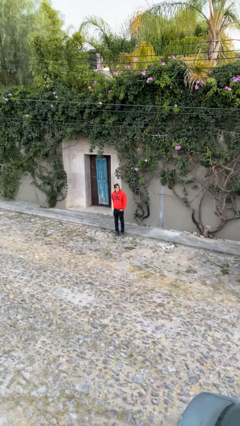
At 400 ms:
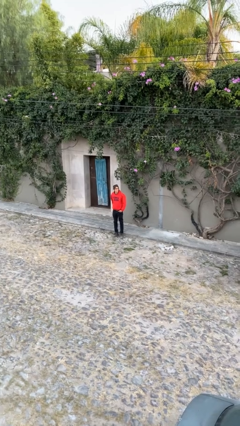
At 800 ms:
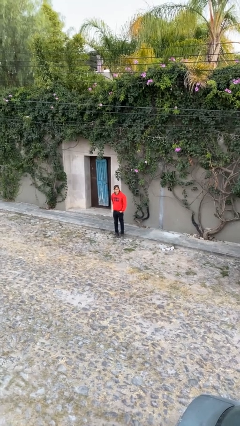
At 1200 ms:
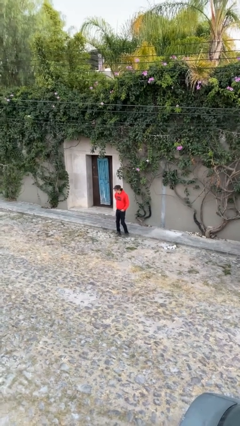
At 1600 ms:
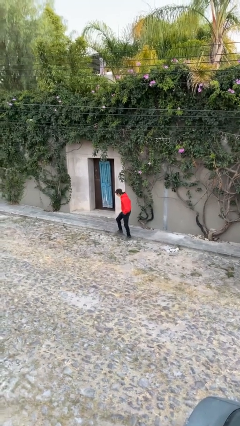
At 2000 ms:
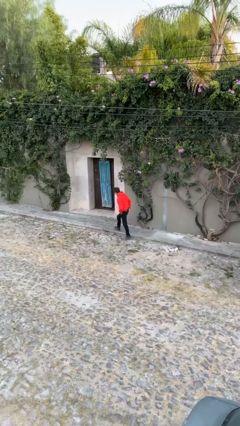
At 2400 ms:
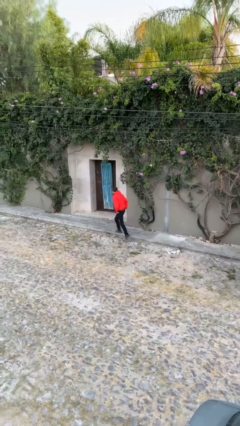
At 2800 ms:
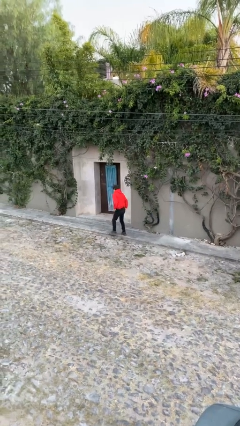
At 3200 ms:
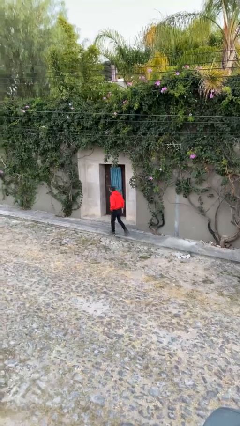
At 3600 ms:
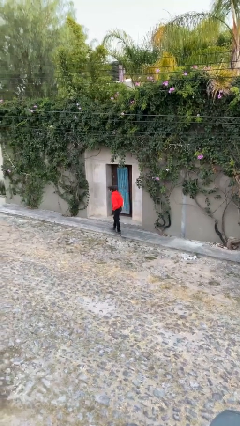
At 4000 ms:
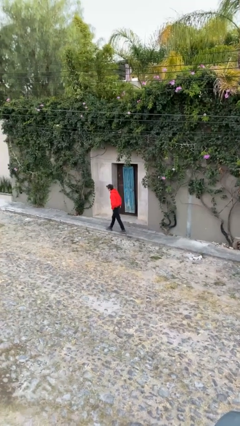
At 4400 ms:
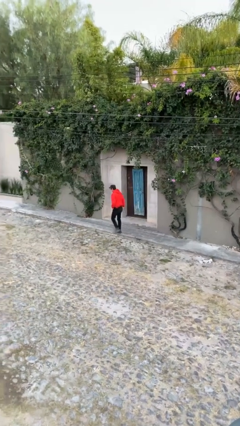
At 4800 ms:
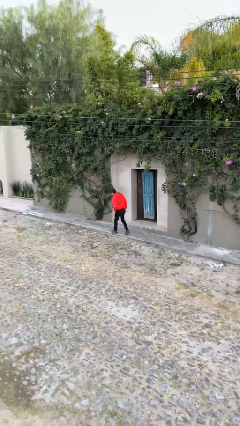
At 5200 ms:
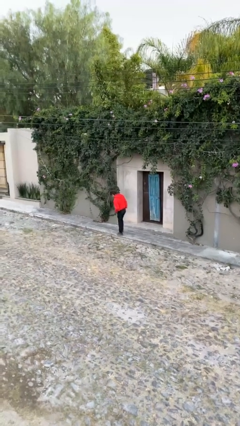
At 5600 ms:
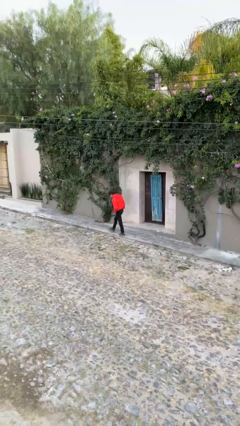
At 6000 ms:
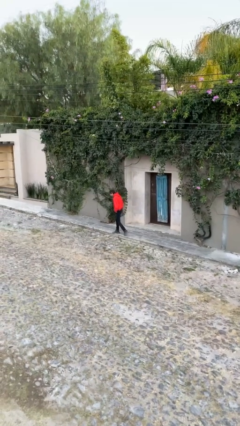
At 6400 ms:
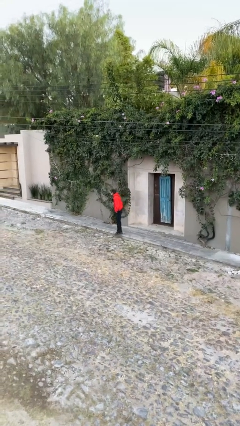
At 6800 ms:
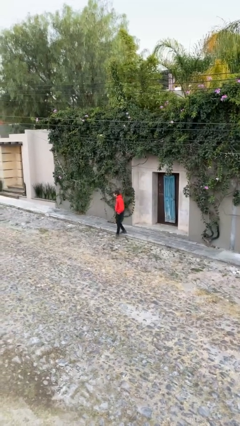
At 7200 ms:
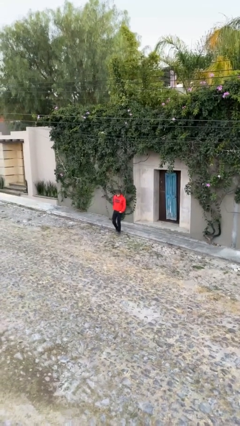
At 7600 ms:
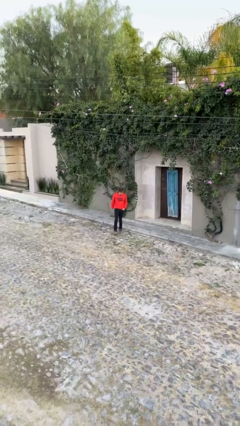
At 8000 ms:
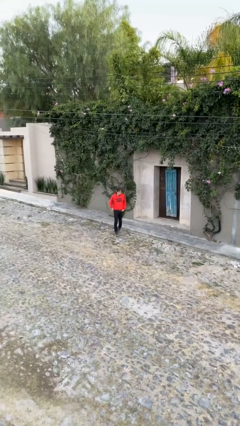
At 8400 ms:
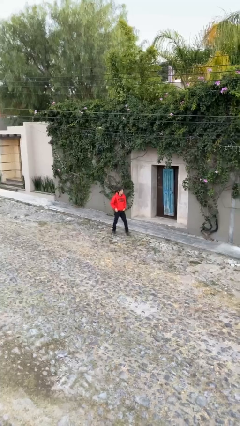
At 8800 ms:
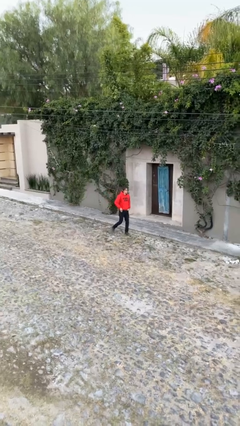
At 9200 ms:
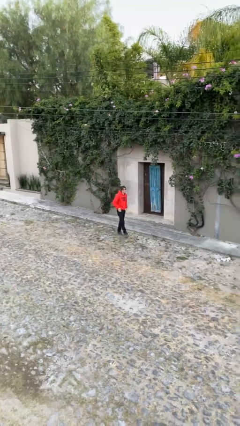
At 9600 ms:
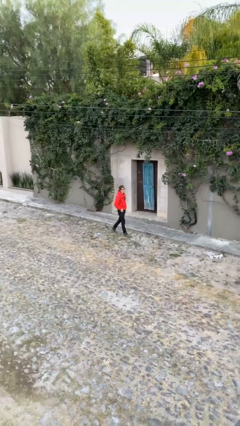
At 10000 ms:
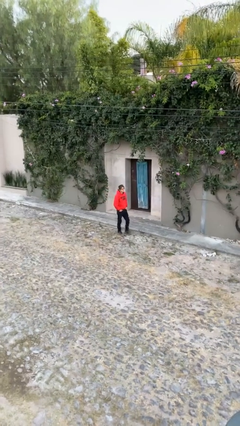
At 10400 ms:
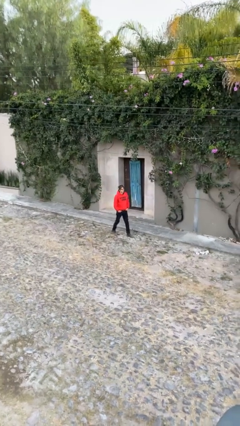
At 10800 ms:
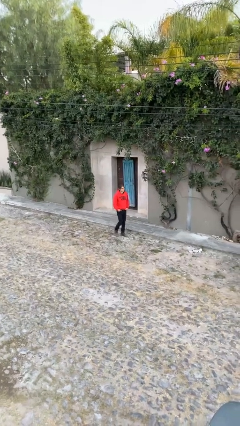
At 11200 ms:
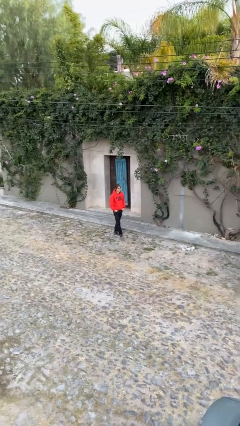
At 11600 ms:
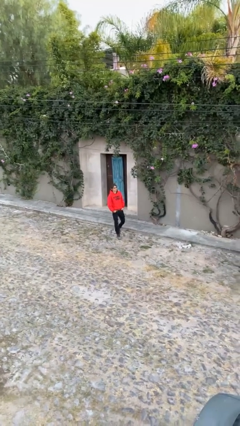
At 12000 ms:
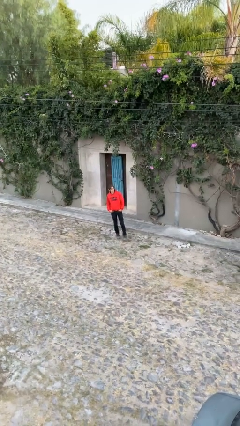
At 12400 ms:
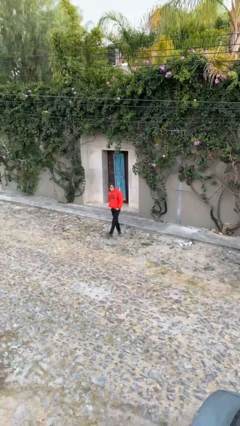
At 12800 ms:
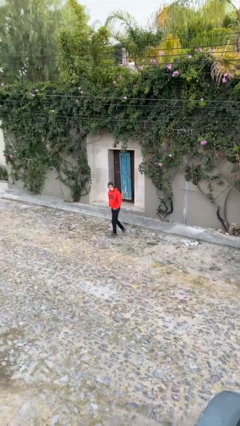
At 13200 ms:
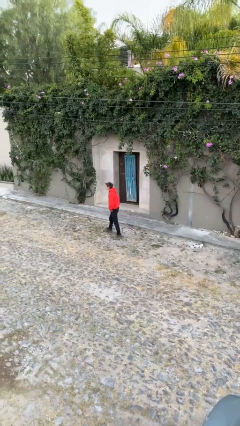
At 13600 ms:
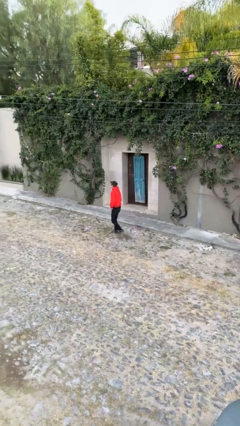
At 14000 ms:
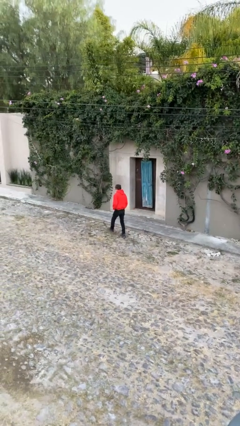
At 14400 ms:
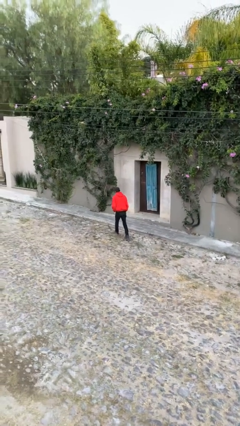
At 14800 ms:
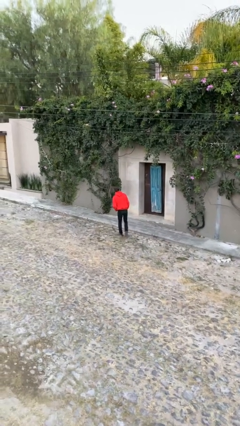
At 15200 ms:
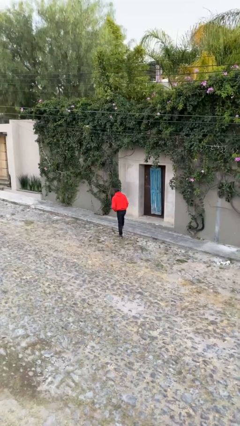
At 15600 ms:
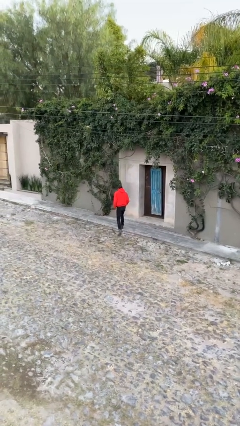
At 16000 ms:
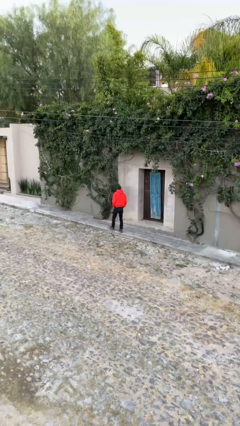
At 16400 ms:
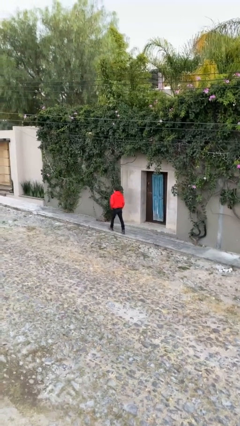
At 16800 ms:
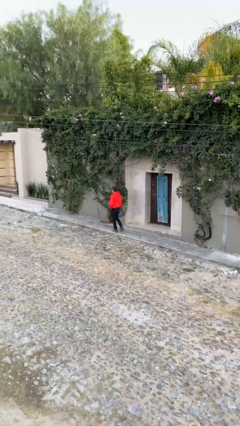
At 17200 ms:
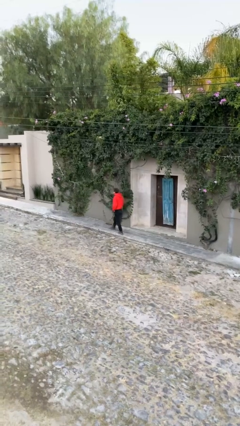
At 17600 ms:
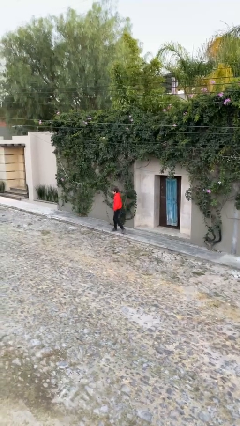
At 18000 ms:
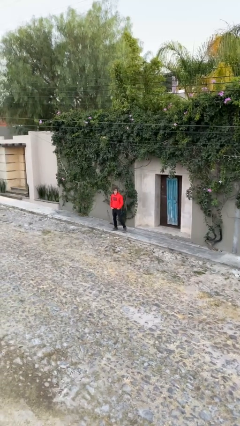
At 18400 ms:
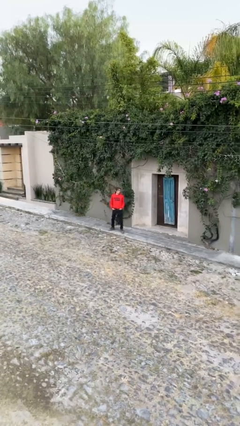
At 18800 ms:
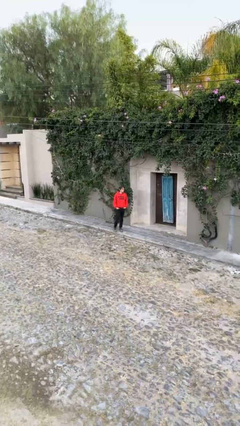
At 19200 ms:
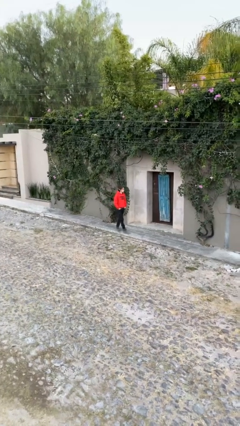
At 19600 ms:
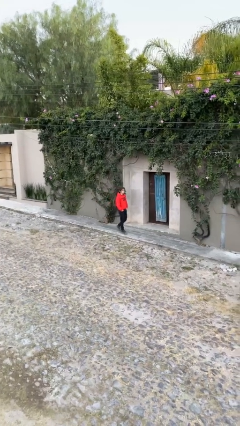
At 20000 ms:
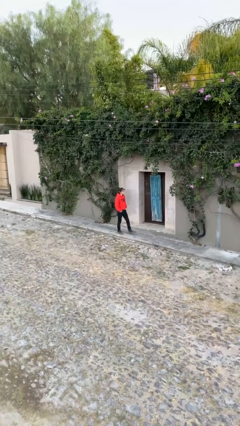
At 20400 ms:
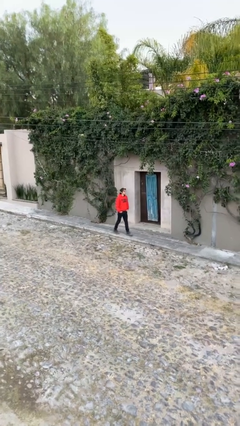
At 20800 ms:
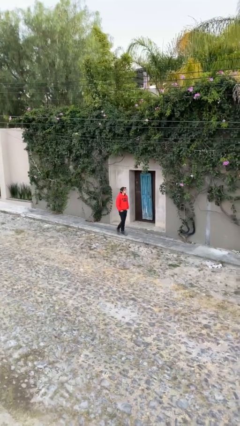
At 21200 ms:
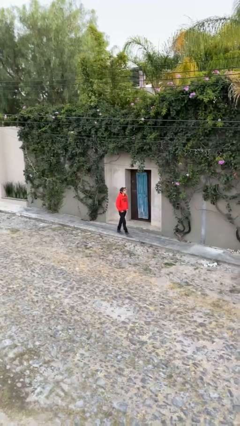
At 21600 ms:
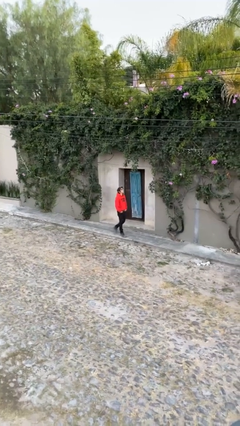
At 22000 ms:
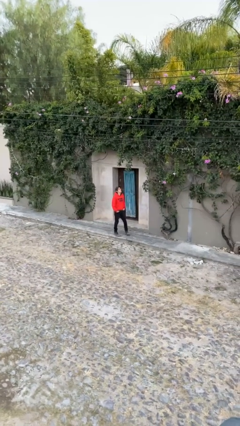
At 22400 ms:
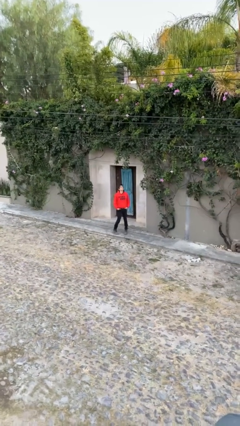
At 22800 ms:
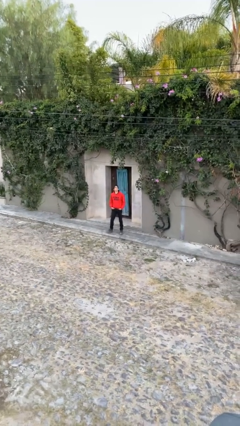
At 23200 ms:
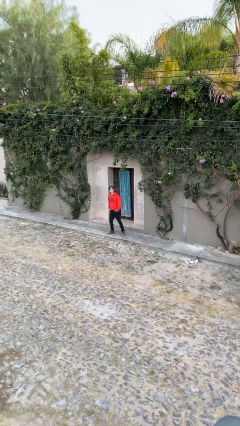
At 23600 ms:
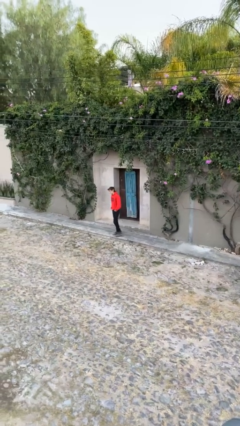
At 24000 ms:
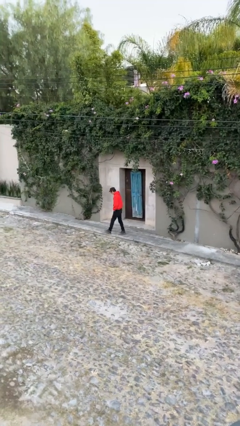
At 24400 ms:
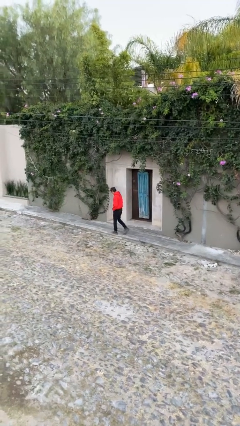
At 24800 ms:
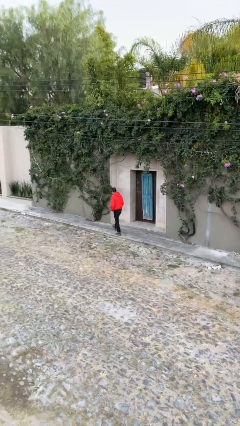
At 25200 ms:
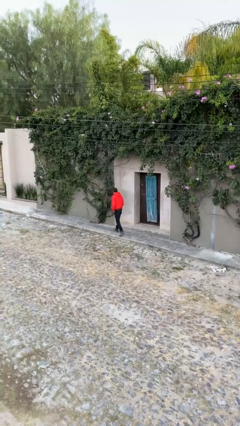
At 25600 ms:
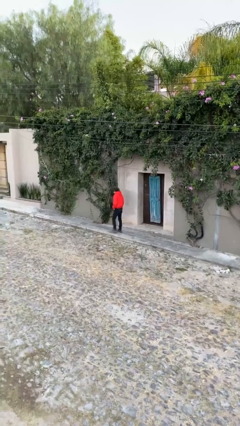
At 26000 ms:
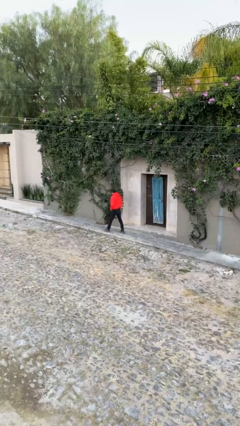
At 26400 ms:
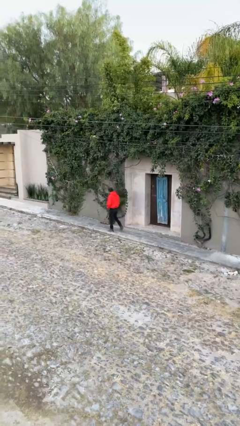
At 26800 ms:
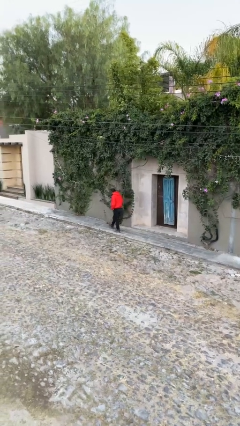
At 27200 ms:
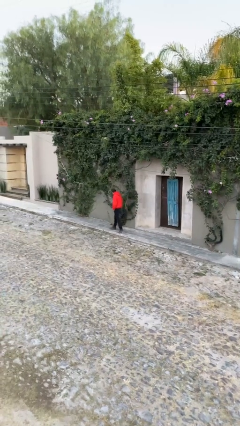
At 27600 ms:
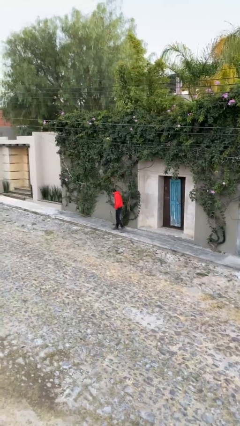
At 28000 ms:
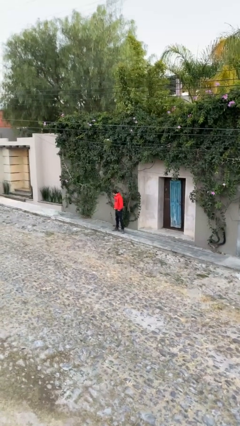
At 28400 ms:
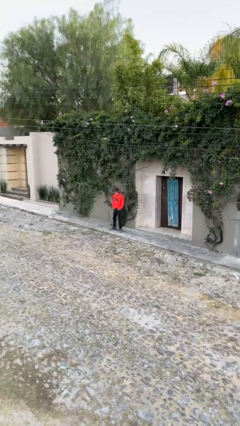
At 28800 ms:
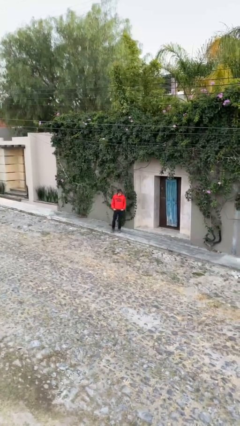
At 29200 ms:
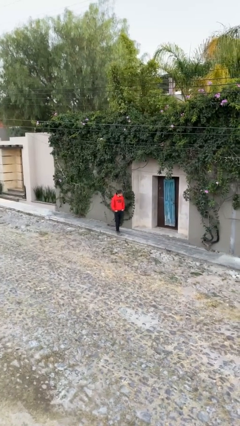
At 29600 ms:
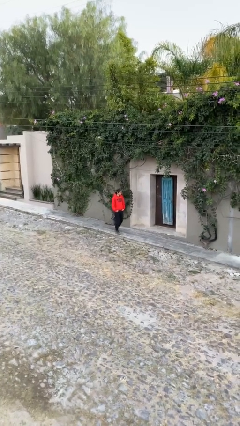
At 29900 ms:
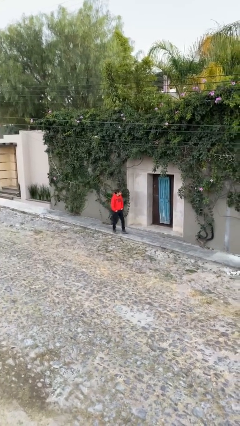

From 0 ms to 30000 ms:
person walks

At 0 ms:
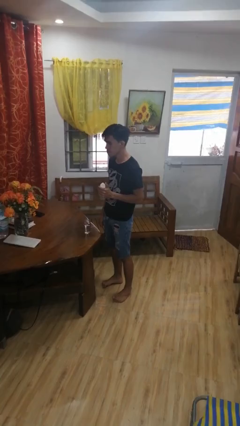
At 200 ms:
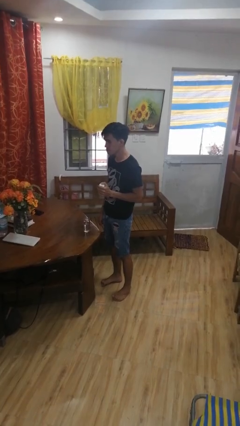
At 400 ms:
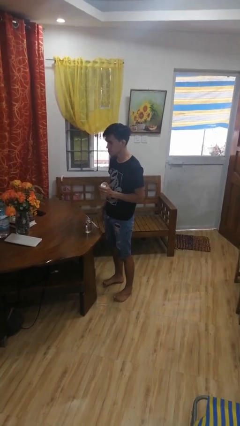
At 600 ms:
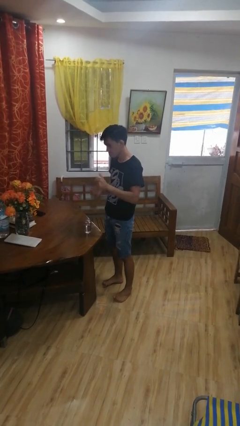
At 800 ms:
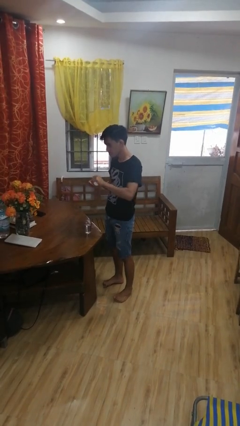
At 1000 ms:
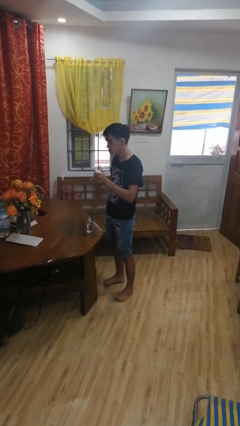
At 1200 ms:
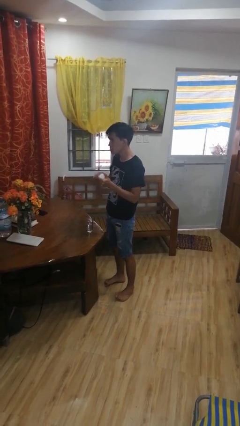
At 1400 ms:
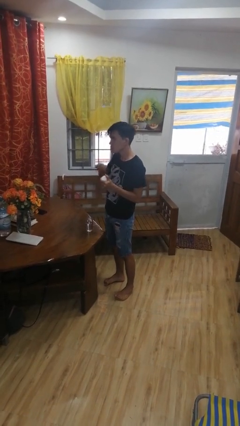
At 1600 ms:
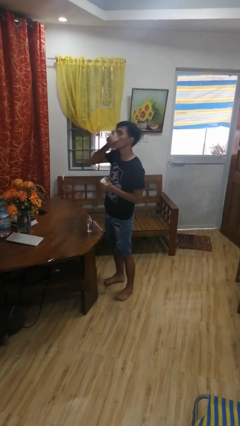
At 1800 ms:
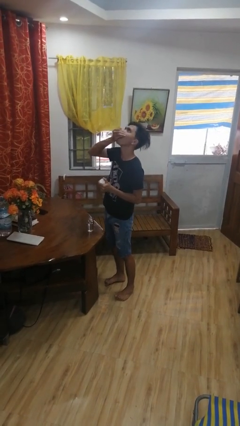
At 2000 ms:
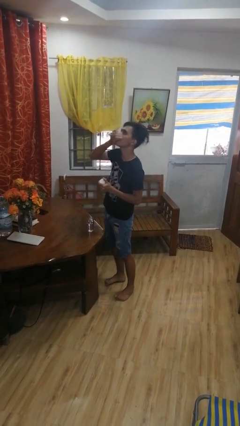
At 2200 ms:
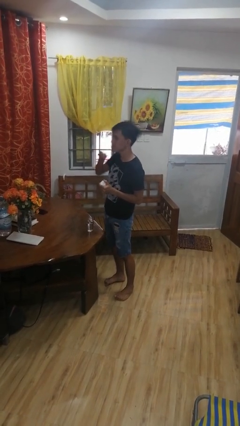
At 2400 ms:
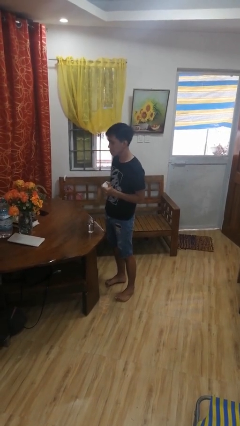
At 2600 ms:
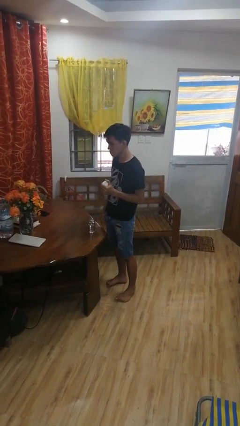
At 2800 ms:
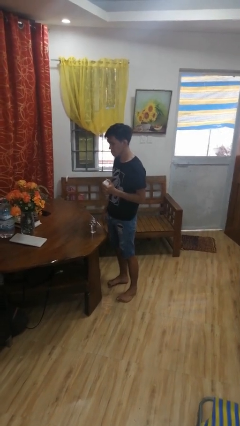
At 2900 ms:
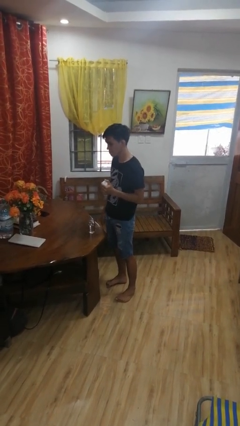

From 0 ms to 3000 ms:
person takes medicine pills

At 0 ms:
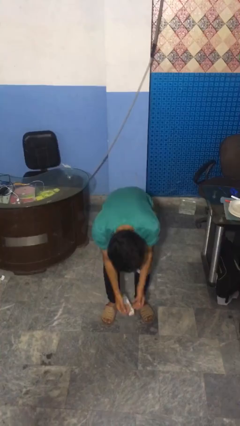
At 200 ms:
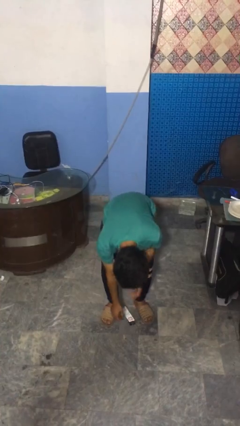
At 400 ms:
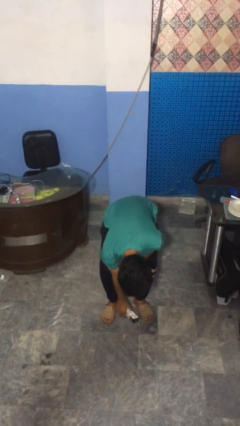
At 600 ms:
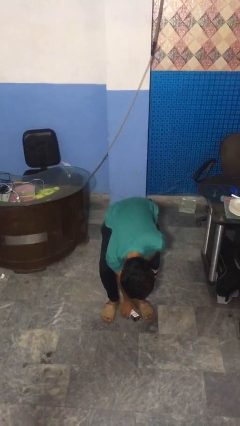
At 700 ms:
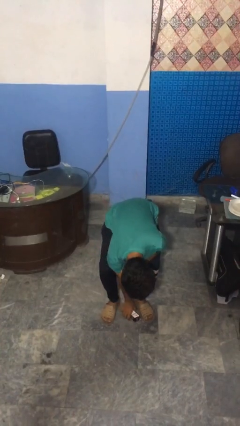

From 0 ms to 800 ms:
person catches dropped object
